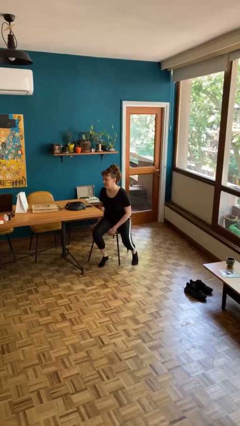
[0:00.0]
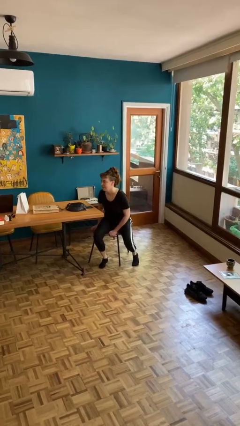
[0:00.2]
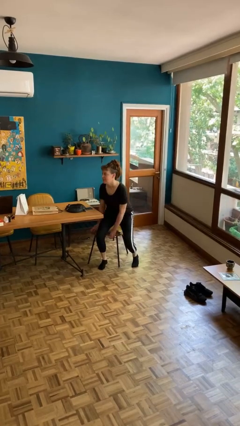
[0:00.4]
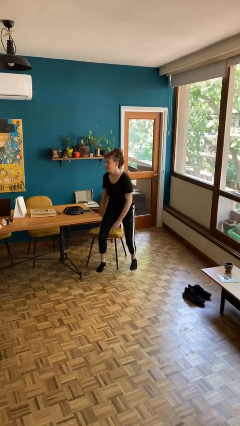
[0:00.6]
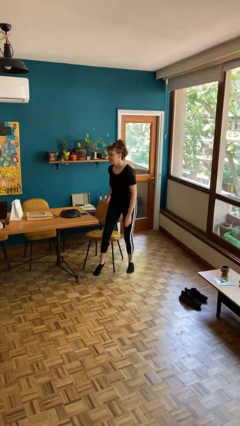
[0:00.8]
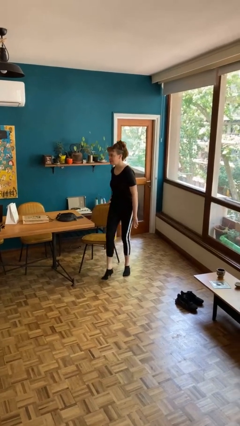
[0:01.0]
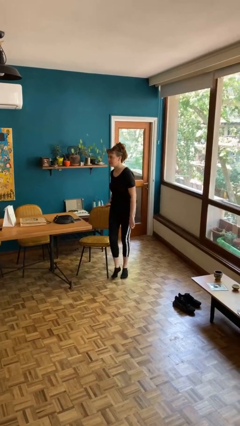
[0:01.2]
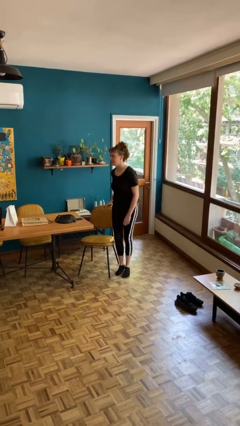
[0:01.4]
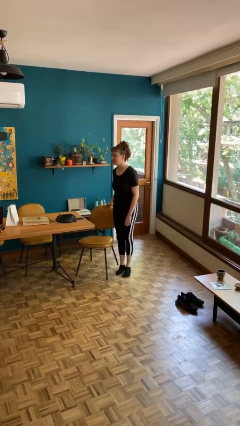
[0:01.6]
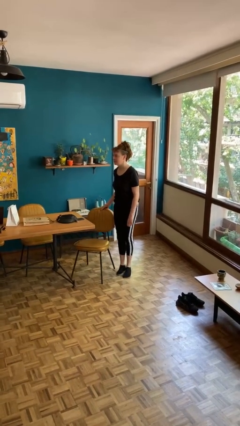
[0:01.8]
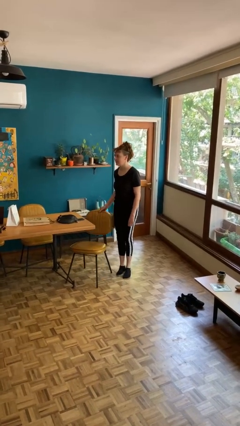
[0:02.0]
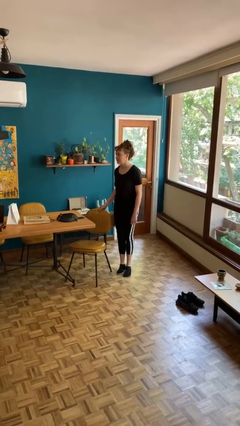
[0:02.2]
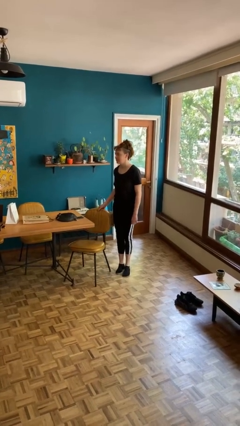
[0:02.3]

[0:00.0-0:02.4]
person stands up

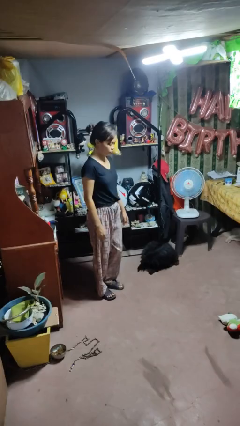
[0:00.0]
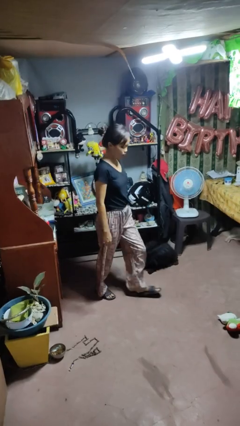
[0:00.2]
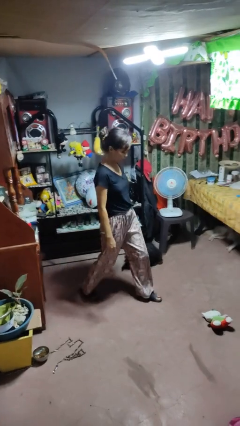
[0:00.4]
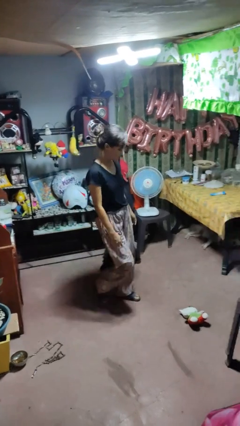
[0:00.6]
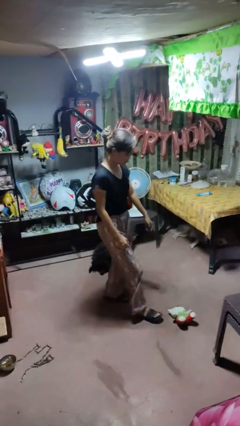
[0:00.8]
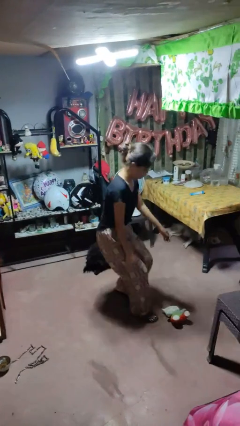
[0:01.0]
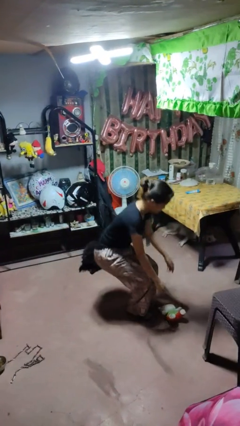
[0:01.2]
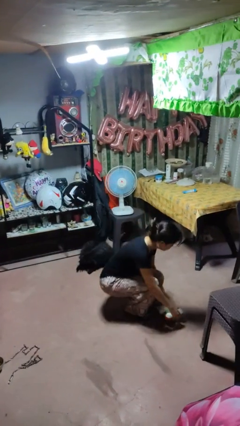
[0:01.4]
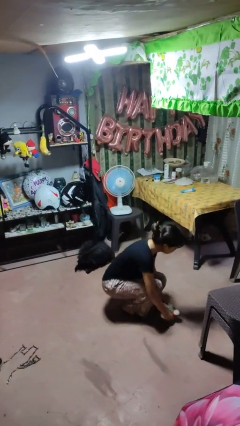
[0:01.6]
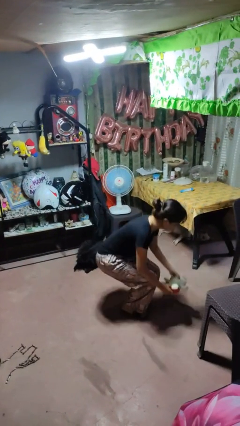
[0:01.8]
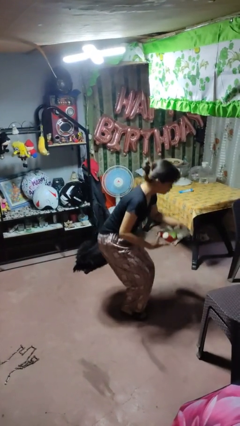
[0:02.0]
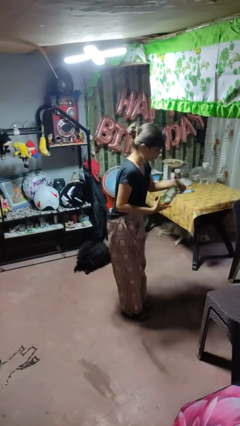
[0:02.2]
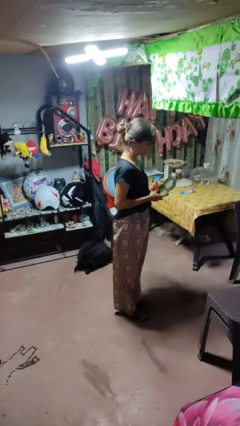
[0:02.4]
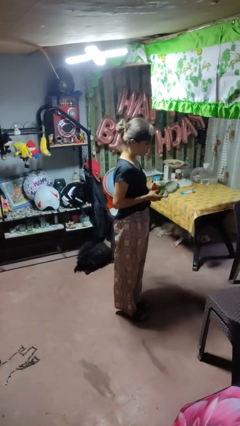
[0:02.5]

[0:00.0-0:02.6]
person picks up object from floor

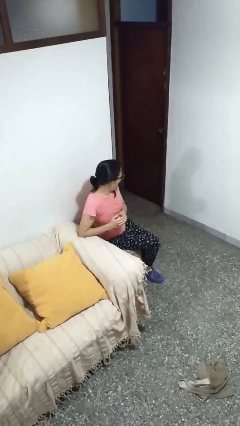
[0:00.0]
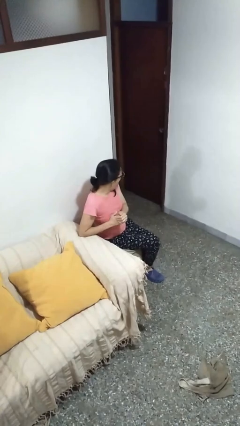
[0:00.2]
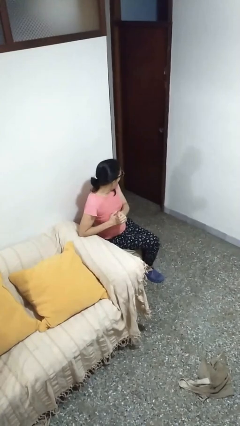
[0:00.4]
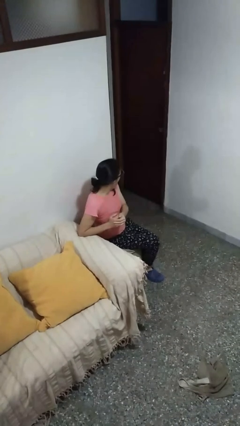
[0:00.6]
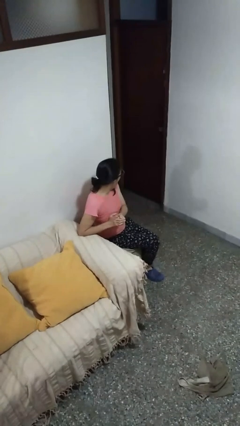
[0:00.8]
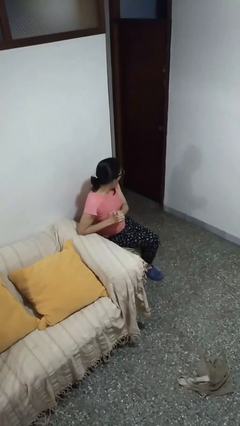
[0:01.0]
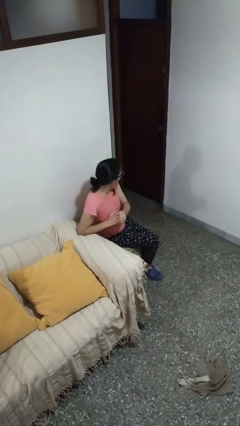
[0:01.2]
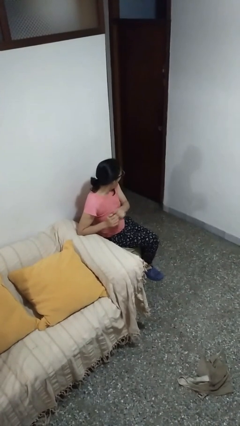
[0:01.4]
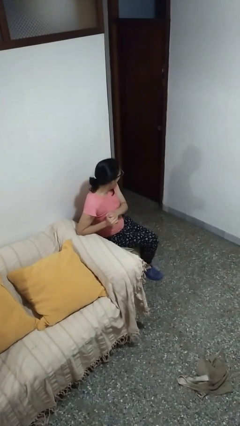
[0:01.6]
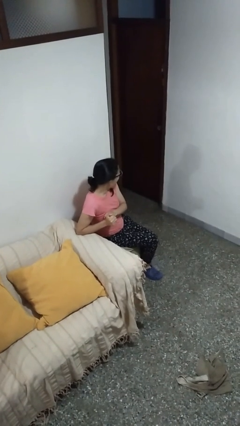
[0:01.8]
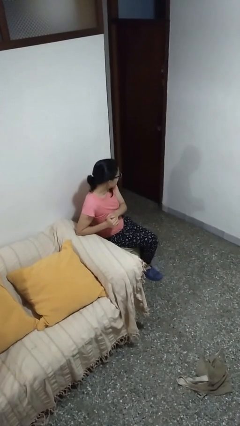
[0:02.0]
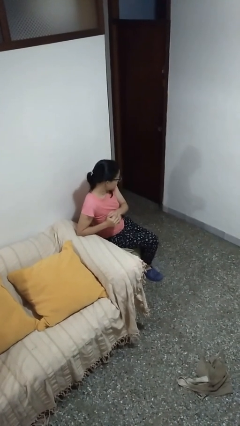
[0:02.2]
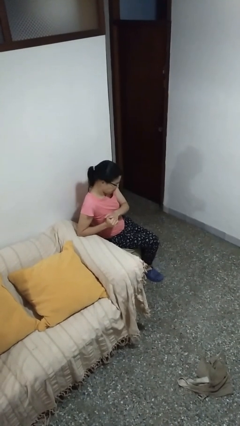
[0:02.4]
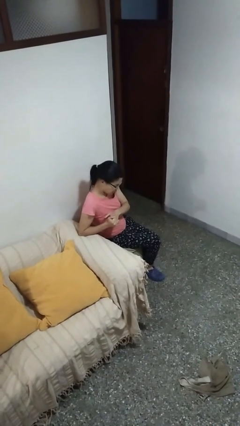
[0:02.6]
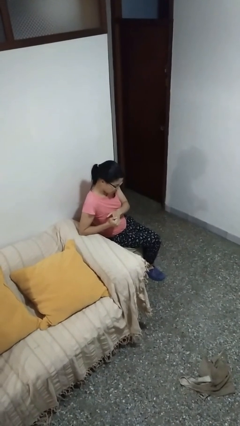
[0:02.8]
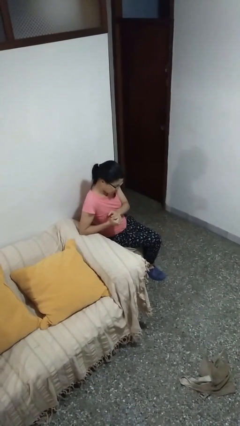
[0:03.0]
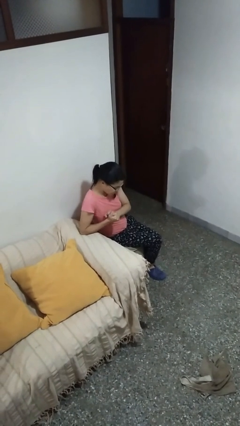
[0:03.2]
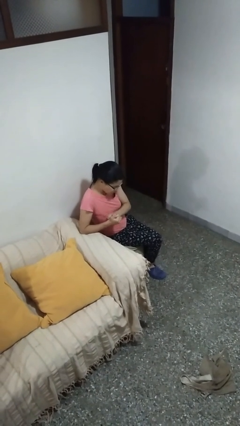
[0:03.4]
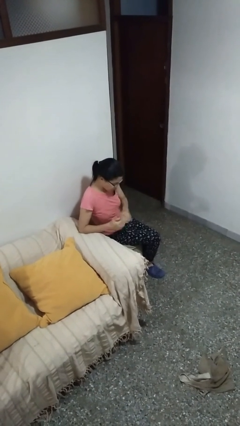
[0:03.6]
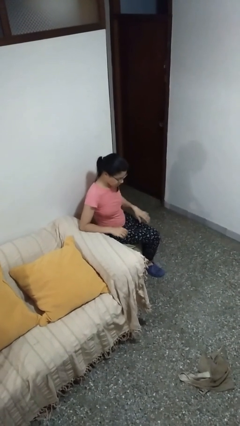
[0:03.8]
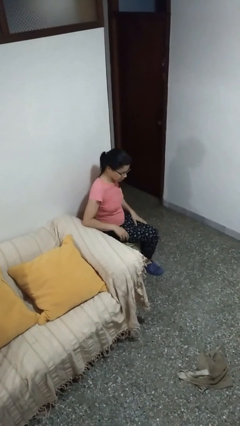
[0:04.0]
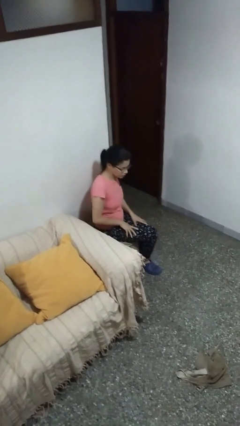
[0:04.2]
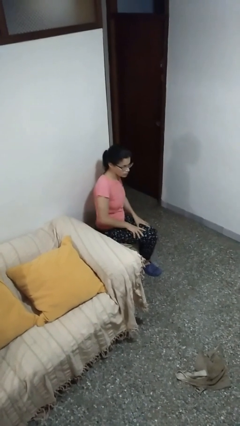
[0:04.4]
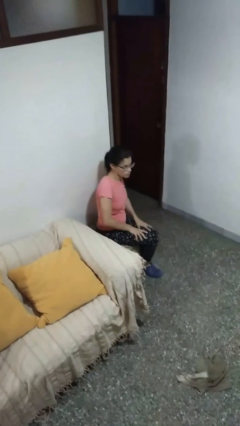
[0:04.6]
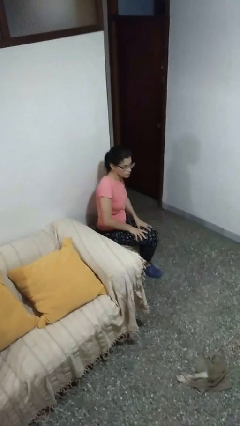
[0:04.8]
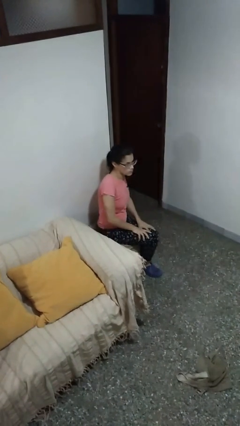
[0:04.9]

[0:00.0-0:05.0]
person cracks knuckles

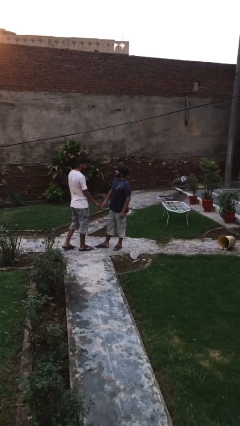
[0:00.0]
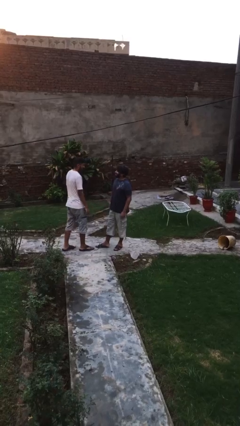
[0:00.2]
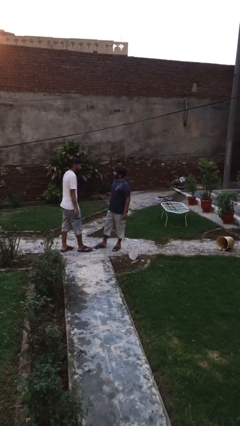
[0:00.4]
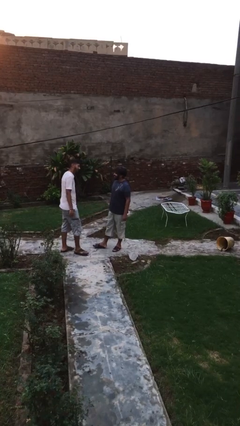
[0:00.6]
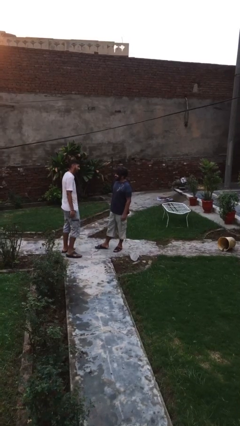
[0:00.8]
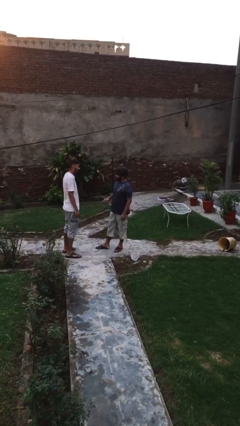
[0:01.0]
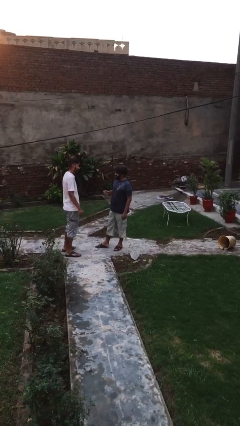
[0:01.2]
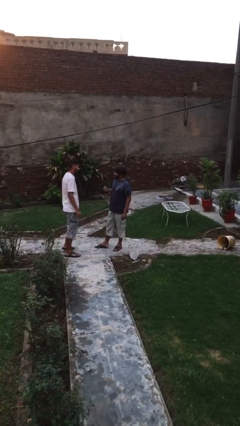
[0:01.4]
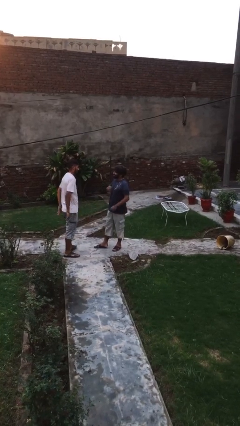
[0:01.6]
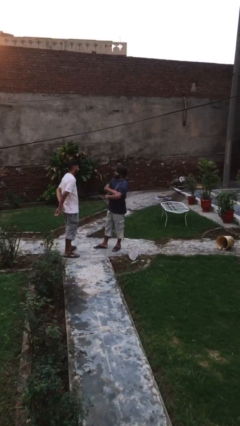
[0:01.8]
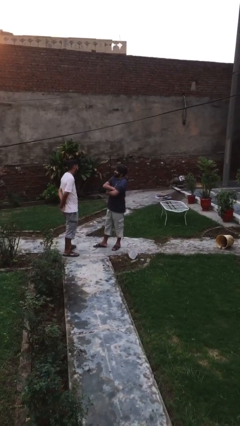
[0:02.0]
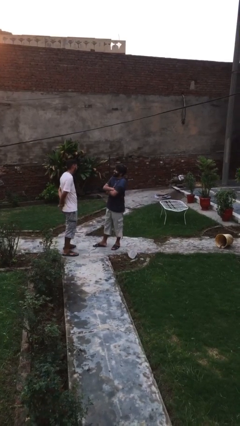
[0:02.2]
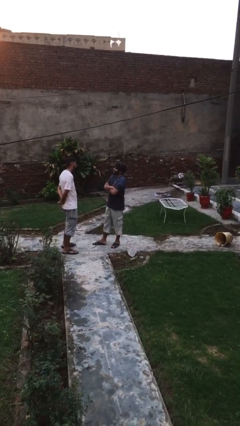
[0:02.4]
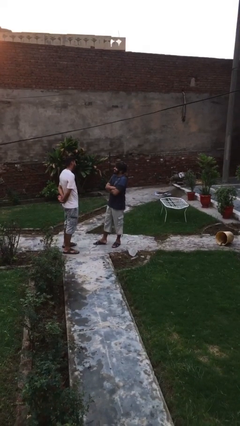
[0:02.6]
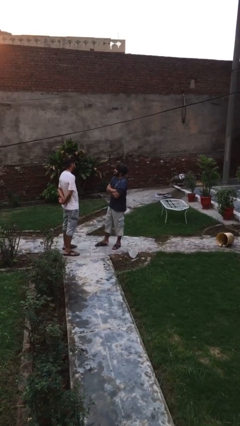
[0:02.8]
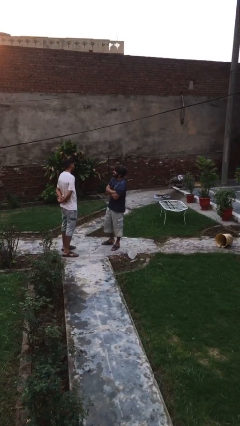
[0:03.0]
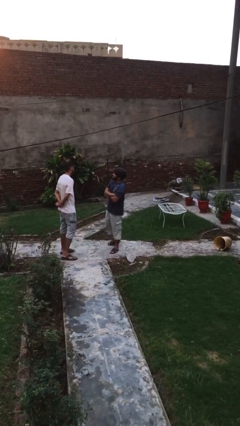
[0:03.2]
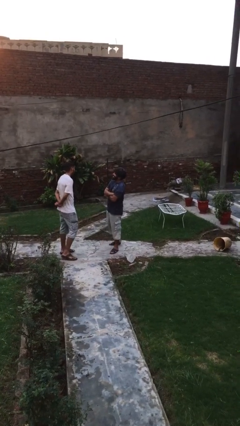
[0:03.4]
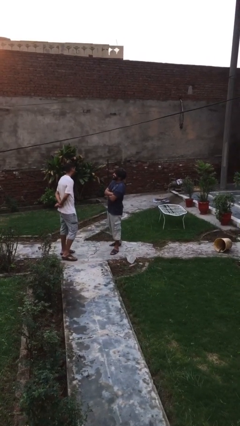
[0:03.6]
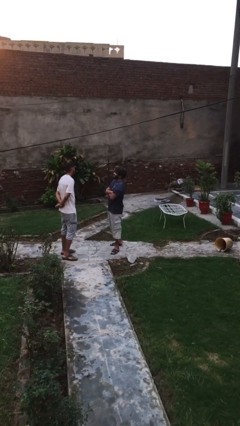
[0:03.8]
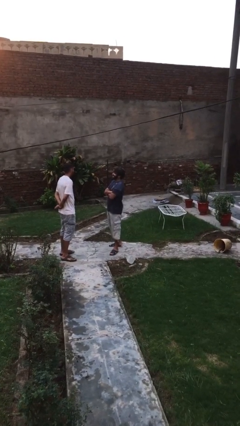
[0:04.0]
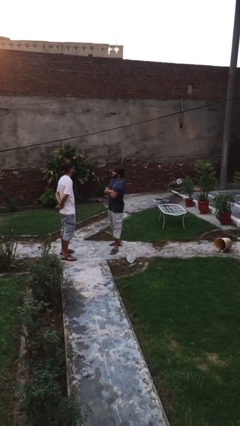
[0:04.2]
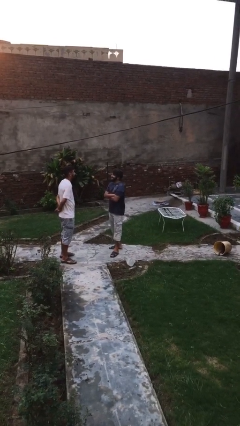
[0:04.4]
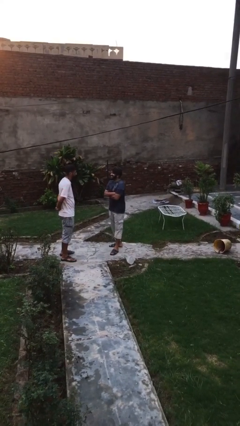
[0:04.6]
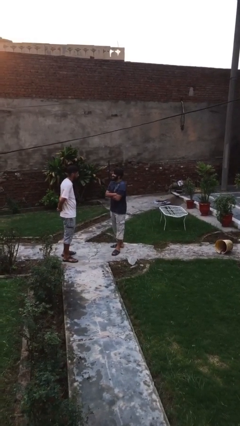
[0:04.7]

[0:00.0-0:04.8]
person talks to person

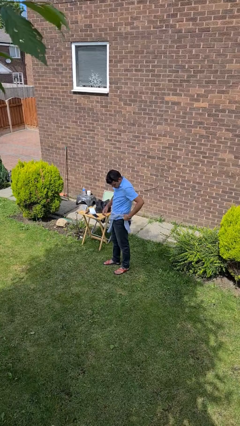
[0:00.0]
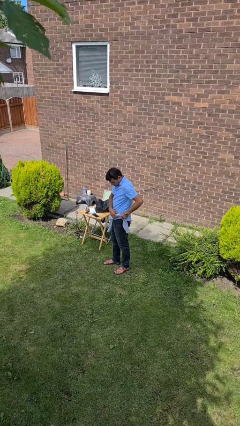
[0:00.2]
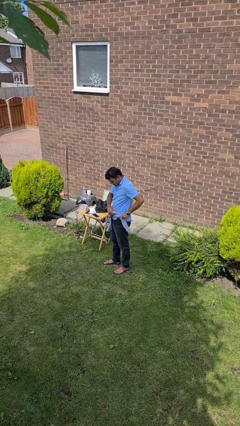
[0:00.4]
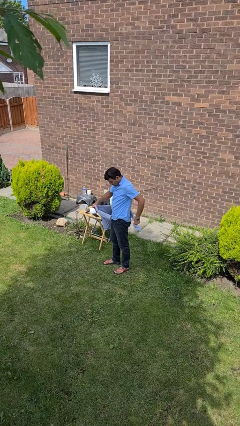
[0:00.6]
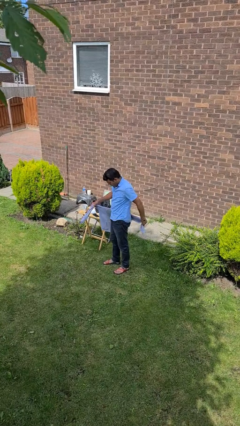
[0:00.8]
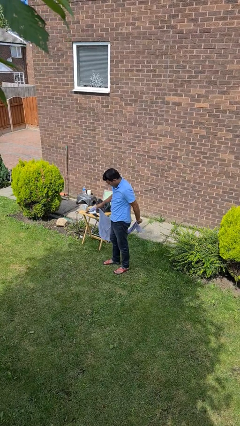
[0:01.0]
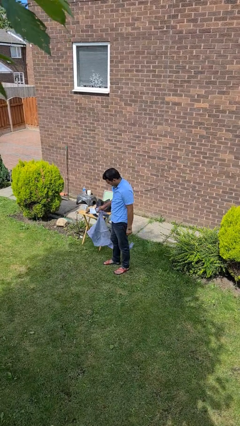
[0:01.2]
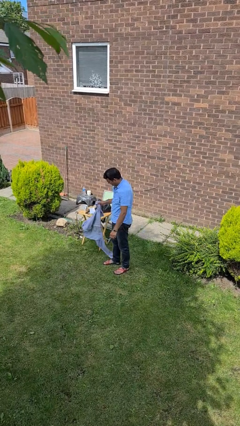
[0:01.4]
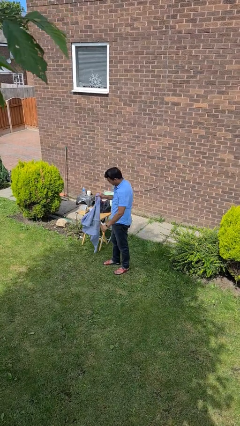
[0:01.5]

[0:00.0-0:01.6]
person unties jacket around waist

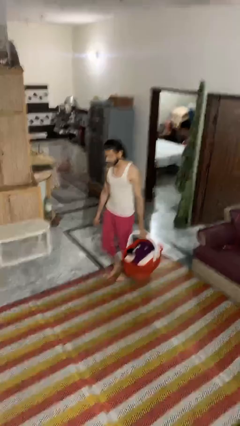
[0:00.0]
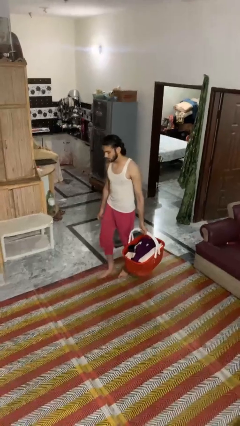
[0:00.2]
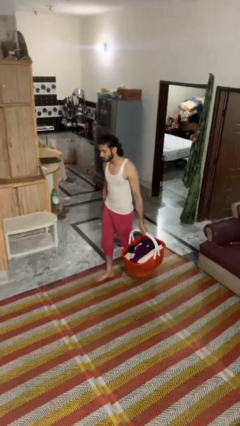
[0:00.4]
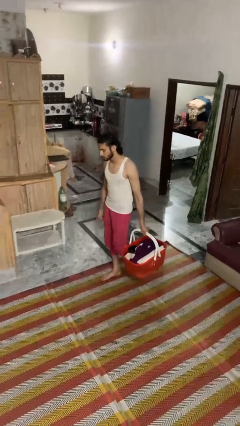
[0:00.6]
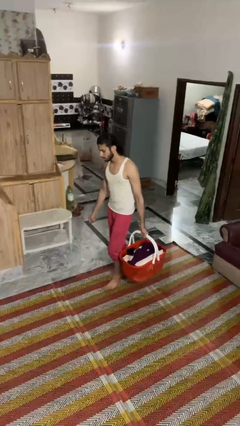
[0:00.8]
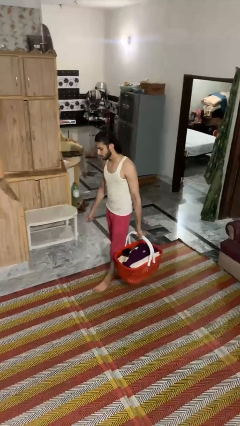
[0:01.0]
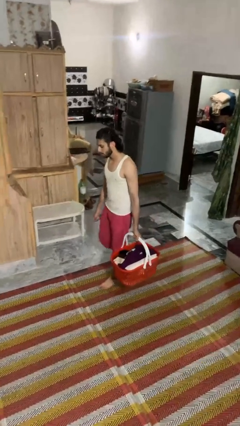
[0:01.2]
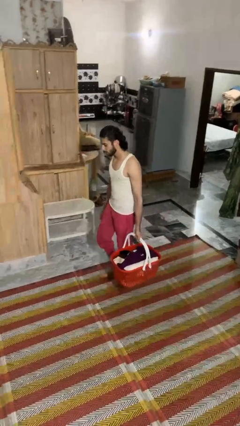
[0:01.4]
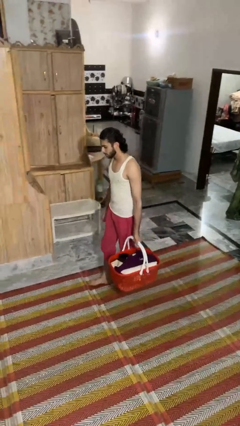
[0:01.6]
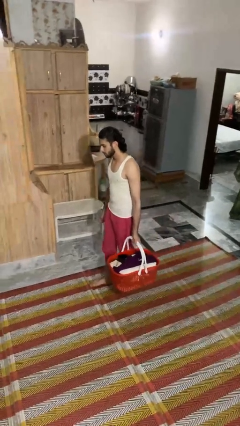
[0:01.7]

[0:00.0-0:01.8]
person carries laundry basket
